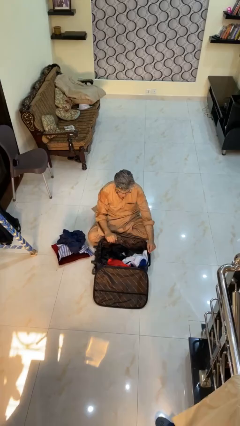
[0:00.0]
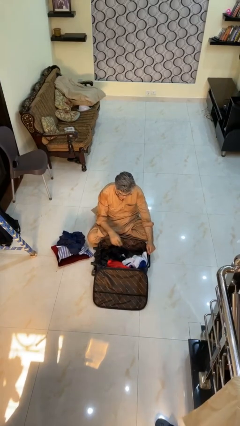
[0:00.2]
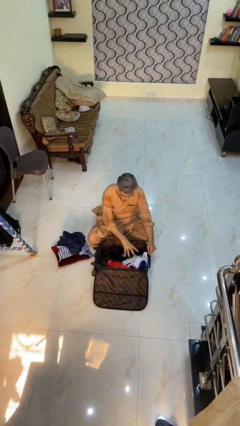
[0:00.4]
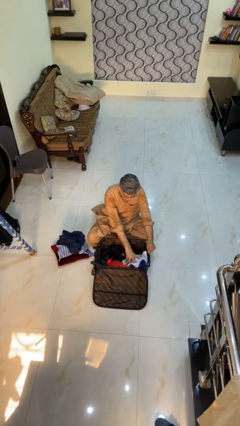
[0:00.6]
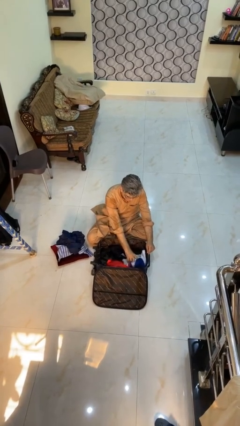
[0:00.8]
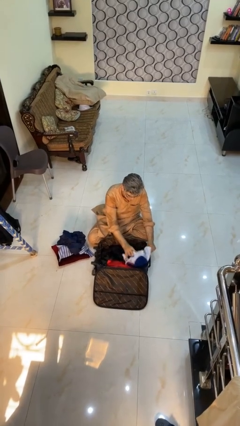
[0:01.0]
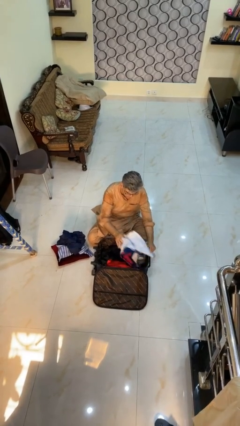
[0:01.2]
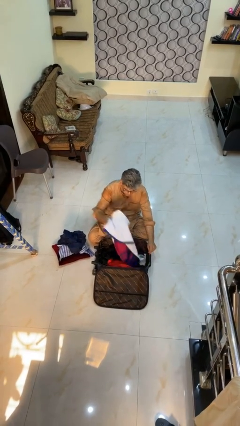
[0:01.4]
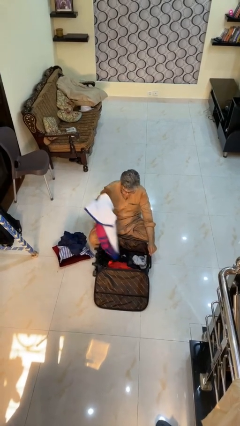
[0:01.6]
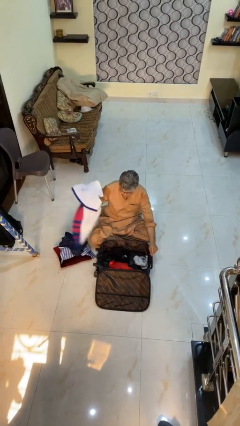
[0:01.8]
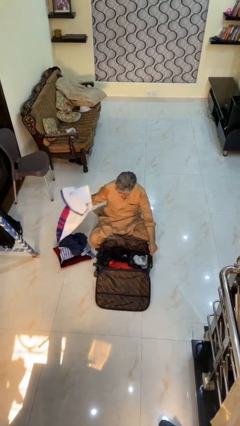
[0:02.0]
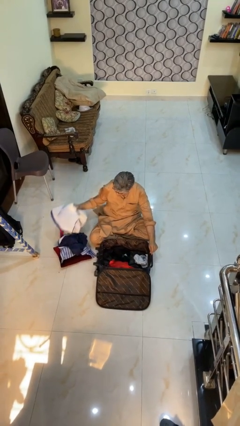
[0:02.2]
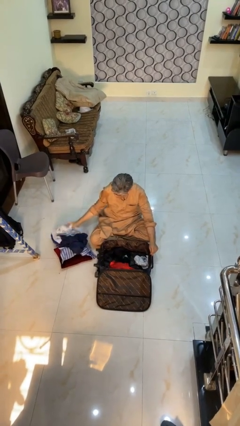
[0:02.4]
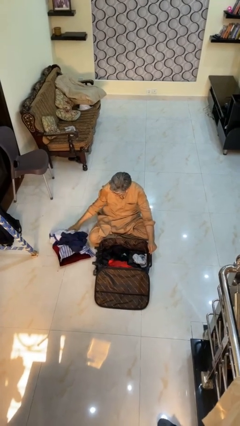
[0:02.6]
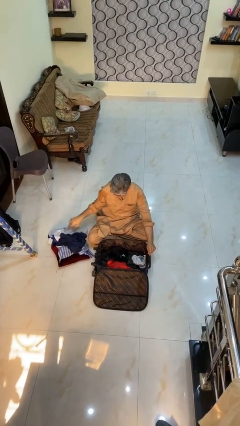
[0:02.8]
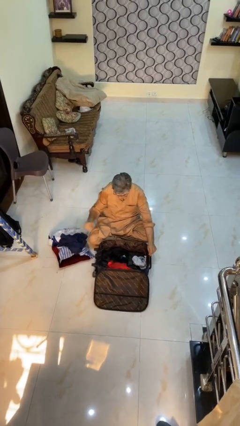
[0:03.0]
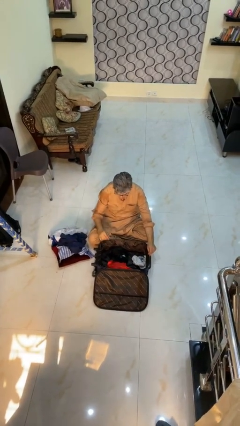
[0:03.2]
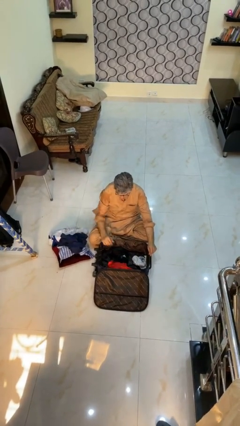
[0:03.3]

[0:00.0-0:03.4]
person unloads clothes from suitcase

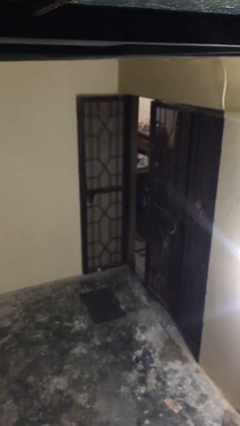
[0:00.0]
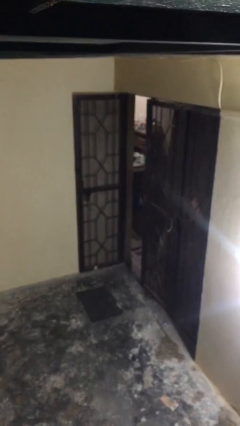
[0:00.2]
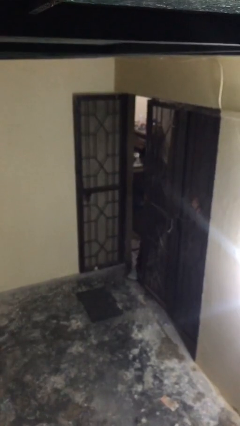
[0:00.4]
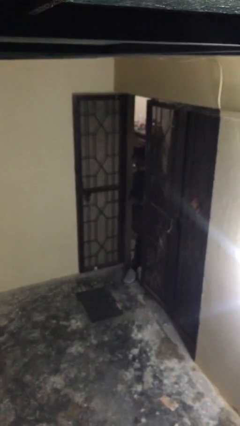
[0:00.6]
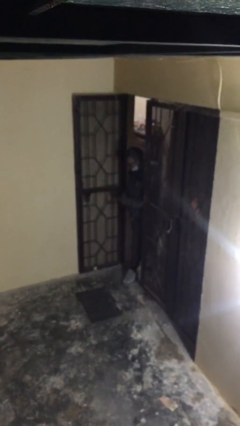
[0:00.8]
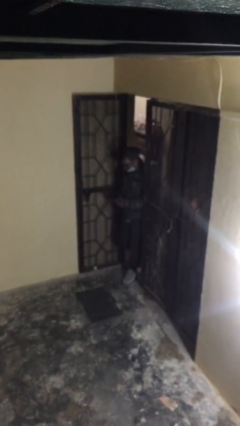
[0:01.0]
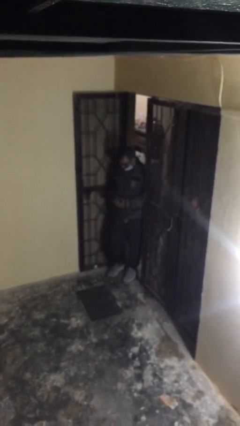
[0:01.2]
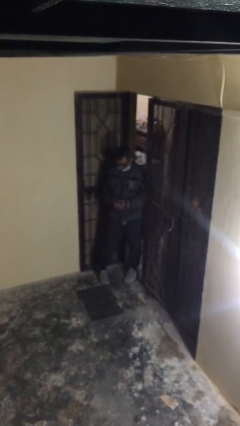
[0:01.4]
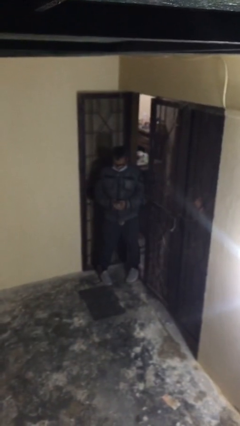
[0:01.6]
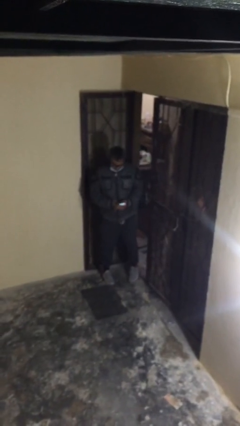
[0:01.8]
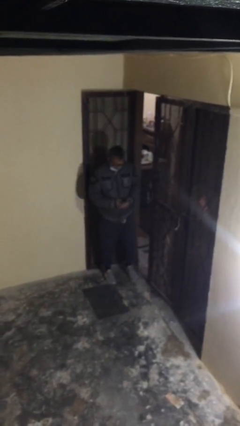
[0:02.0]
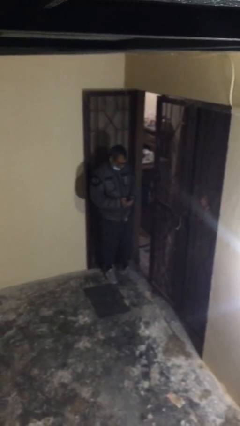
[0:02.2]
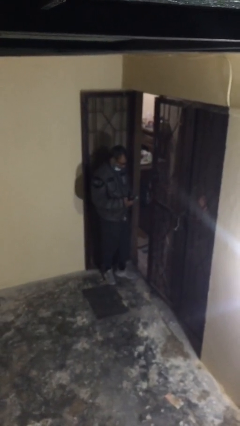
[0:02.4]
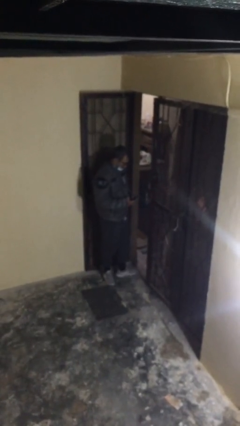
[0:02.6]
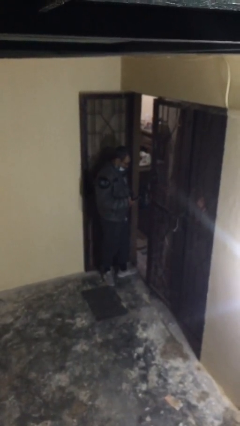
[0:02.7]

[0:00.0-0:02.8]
person enters scene through structure

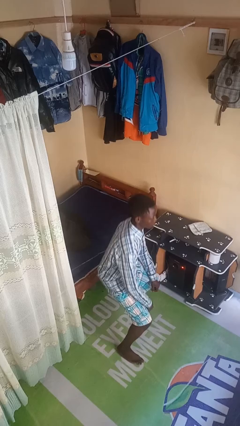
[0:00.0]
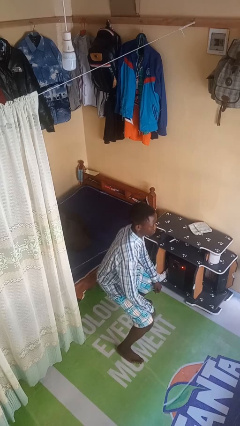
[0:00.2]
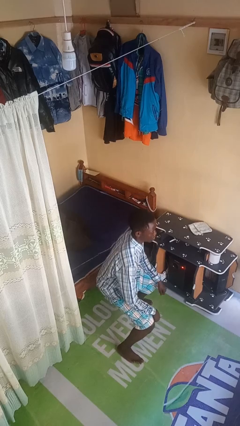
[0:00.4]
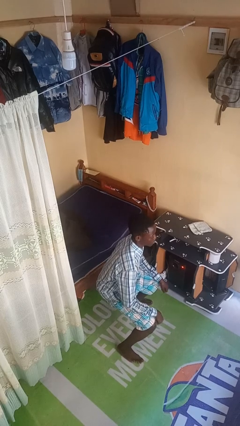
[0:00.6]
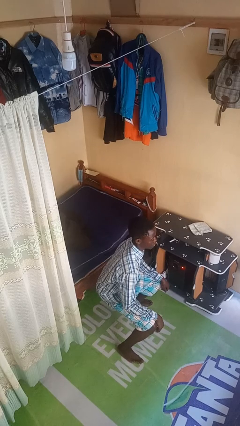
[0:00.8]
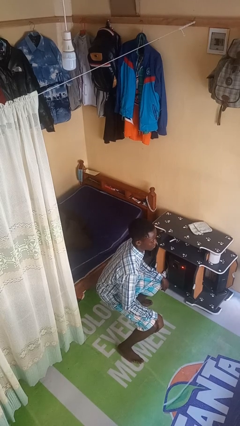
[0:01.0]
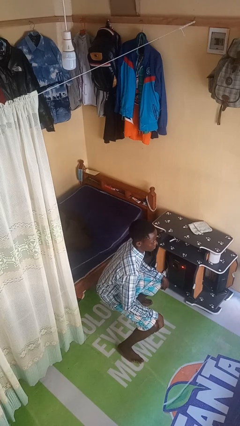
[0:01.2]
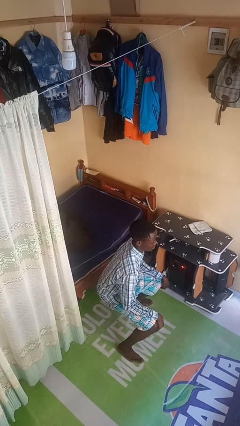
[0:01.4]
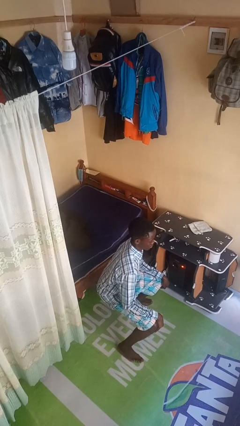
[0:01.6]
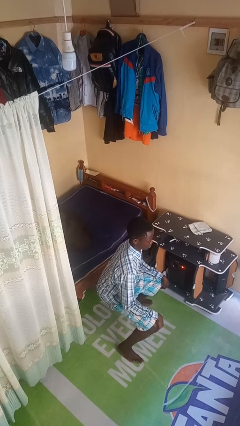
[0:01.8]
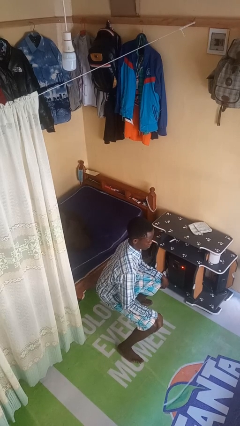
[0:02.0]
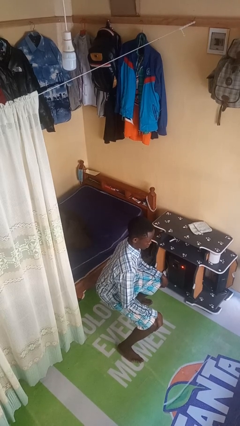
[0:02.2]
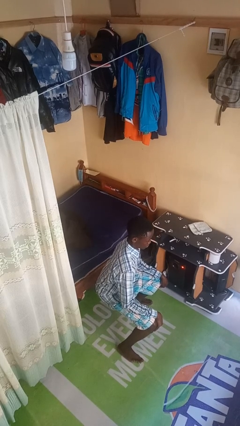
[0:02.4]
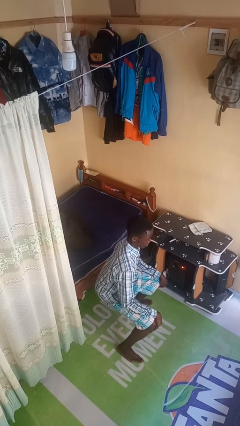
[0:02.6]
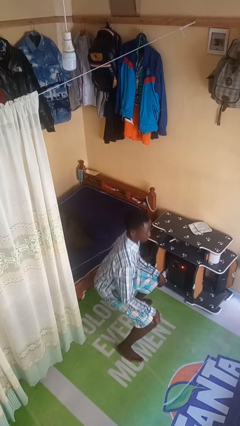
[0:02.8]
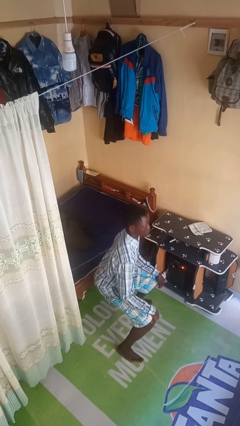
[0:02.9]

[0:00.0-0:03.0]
person squats

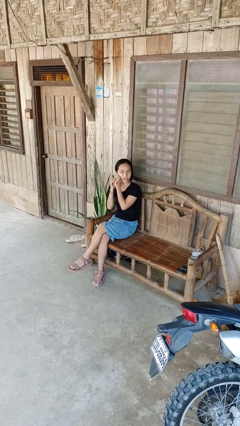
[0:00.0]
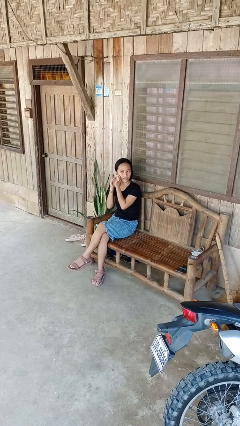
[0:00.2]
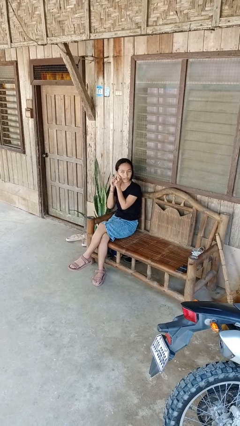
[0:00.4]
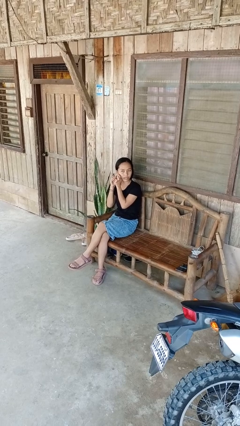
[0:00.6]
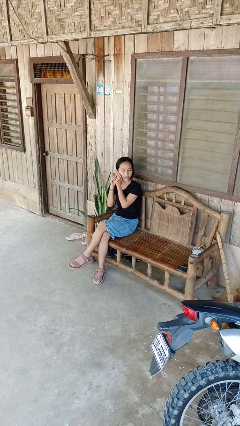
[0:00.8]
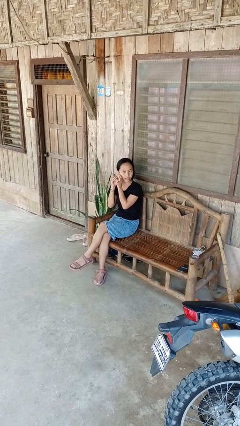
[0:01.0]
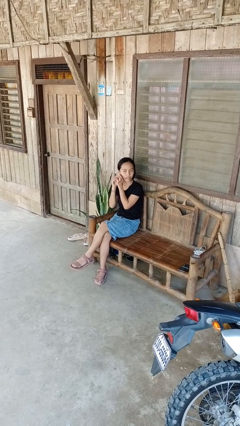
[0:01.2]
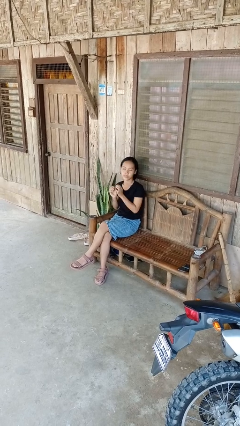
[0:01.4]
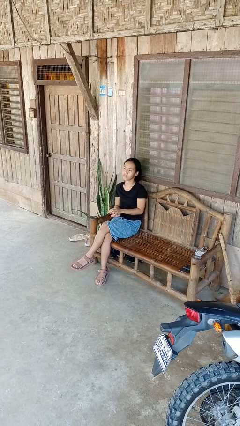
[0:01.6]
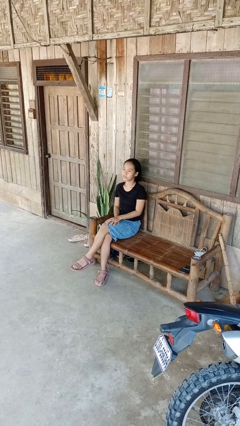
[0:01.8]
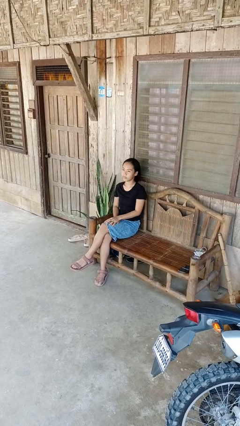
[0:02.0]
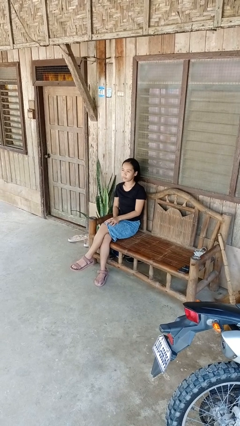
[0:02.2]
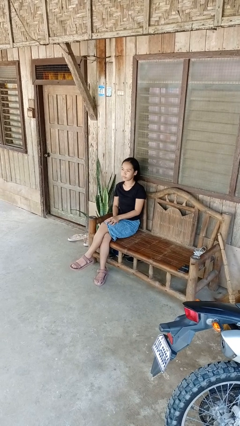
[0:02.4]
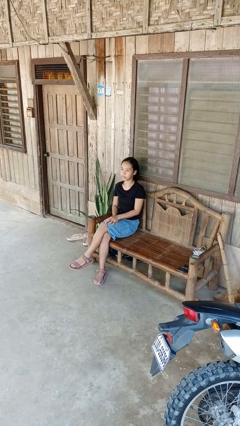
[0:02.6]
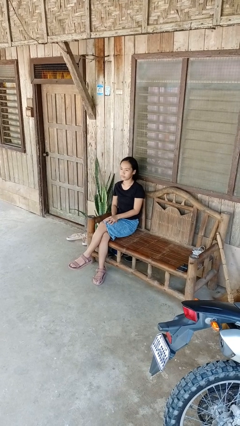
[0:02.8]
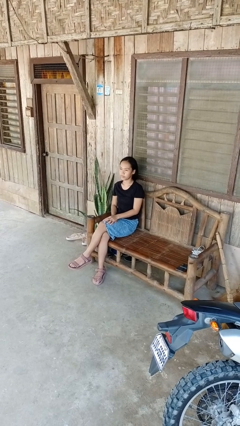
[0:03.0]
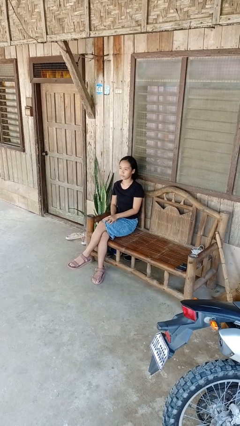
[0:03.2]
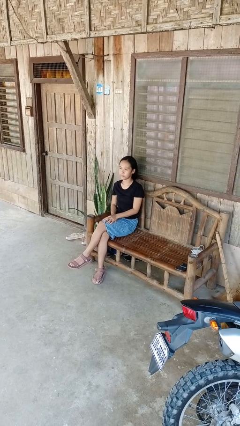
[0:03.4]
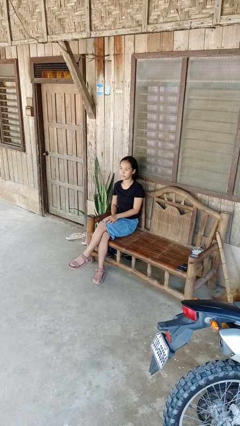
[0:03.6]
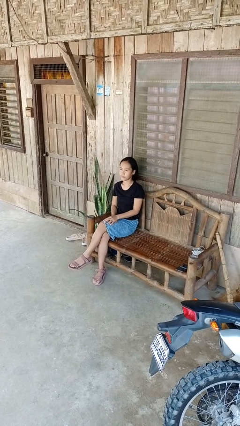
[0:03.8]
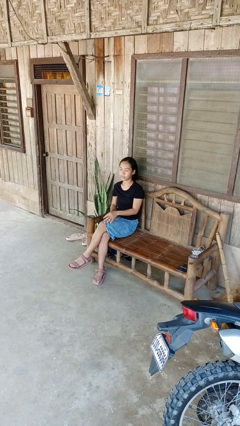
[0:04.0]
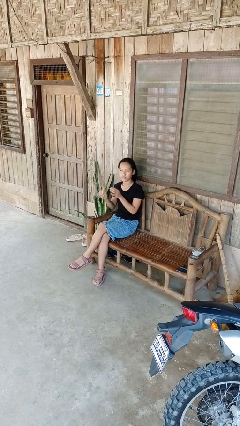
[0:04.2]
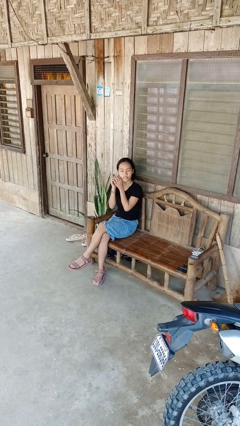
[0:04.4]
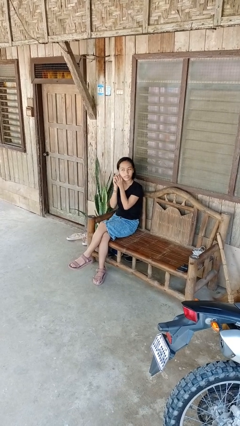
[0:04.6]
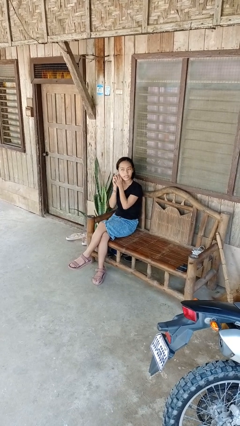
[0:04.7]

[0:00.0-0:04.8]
person puts on earrings

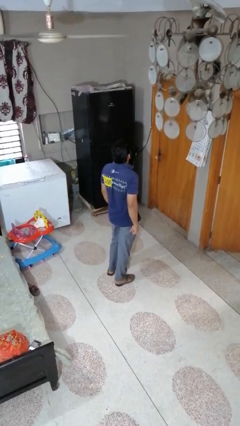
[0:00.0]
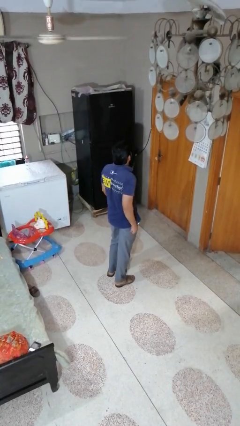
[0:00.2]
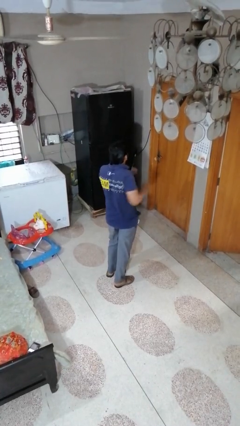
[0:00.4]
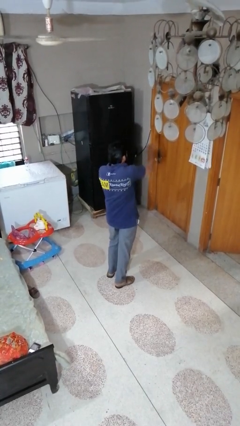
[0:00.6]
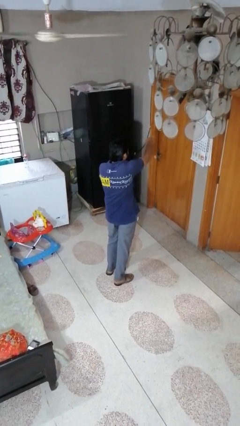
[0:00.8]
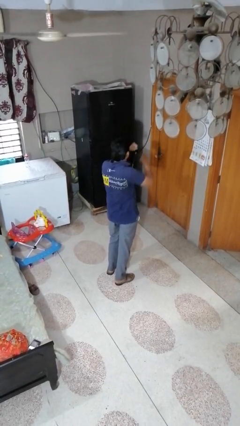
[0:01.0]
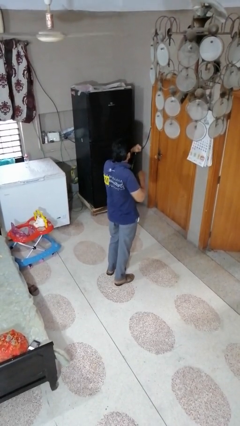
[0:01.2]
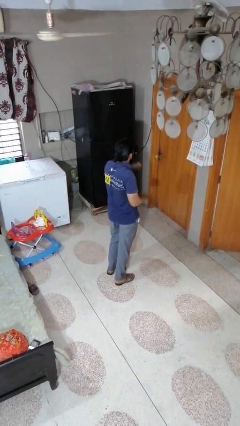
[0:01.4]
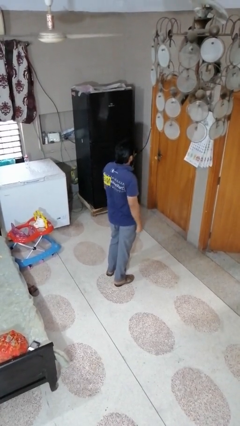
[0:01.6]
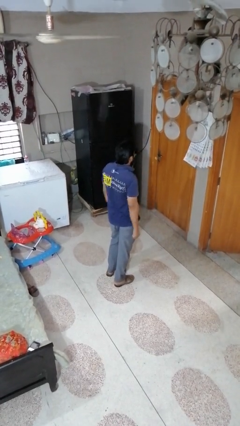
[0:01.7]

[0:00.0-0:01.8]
person karate chop

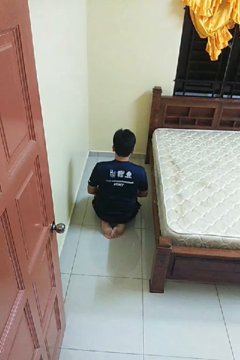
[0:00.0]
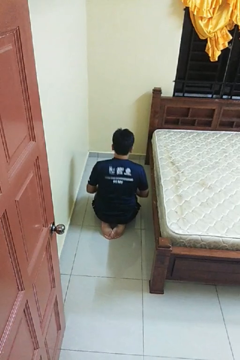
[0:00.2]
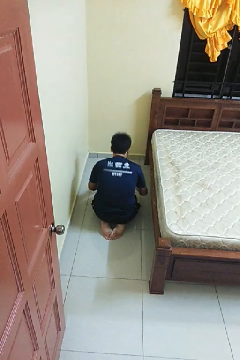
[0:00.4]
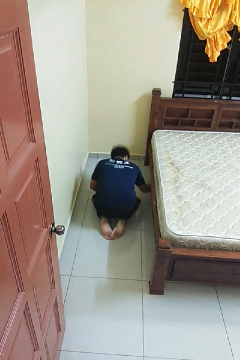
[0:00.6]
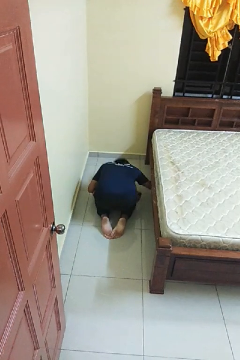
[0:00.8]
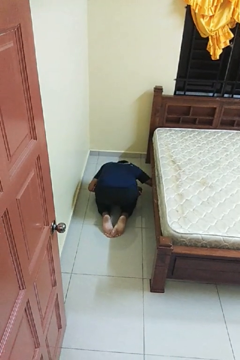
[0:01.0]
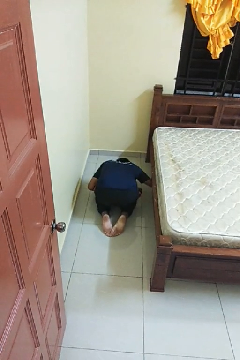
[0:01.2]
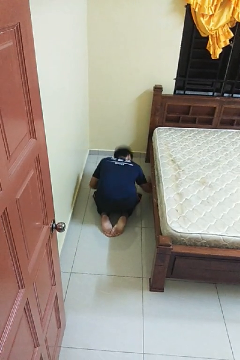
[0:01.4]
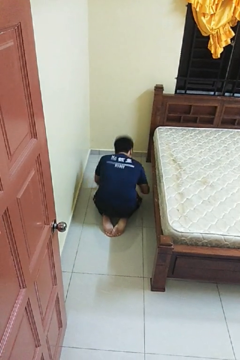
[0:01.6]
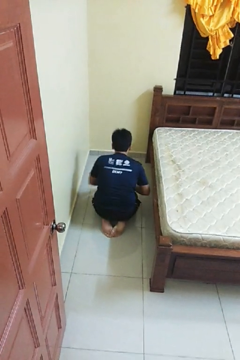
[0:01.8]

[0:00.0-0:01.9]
person searches under bed

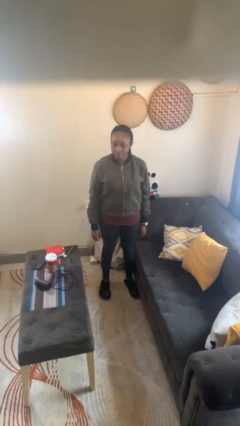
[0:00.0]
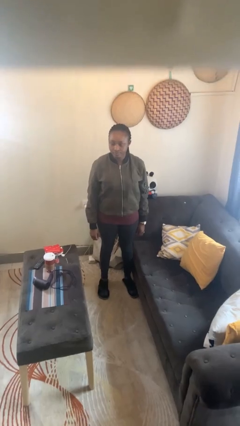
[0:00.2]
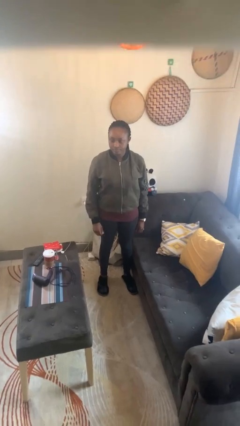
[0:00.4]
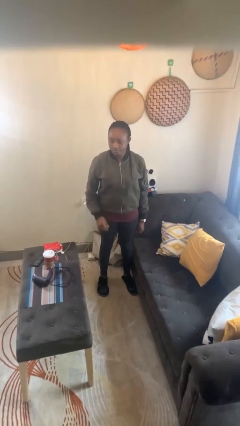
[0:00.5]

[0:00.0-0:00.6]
person gestures behind me
